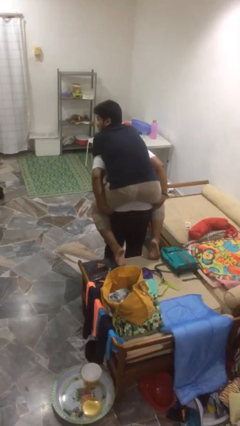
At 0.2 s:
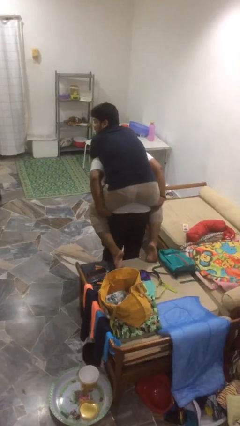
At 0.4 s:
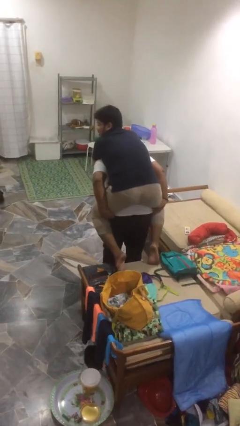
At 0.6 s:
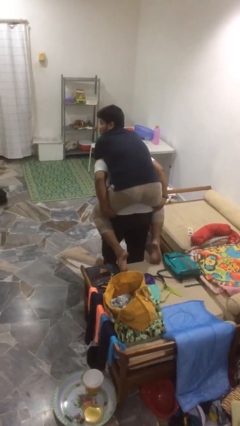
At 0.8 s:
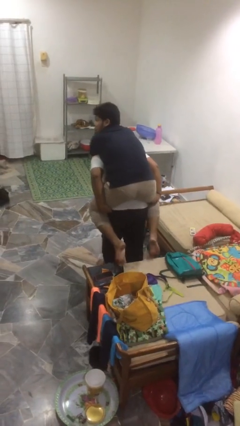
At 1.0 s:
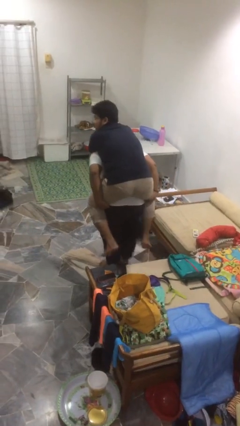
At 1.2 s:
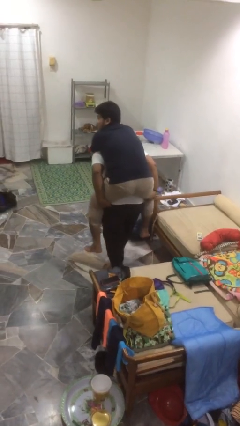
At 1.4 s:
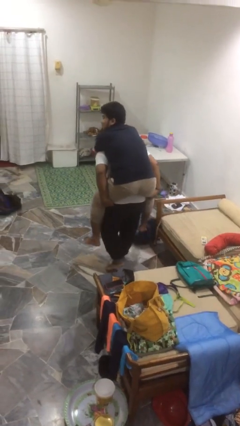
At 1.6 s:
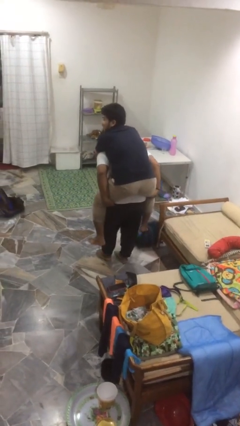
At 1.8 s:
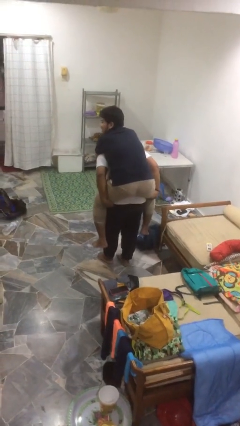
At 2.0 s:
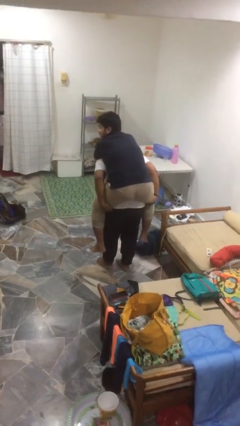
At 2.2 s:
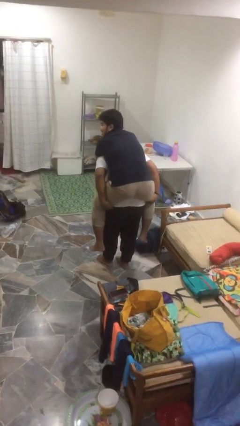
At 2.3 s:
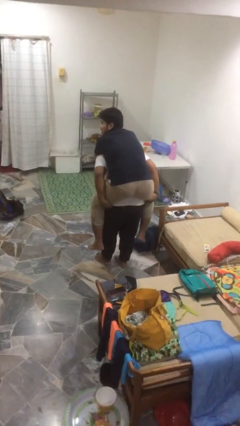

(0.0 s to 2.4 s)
person carries person on back

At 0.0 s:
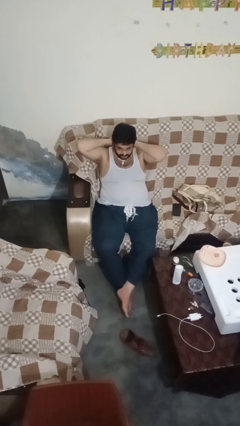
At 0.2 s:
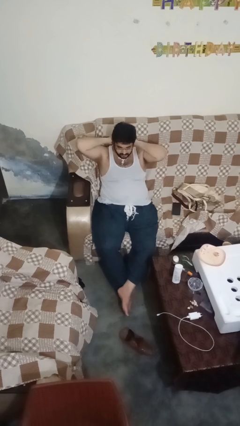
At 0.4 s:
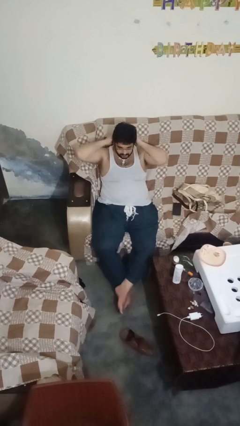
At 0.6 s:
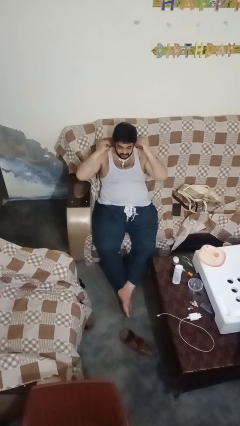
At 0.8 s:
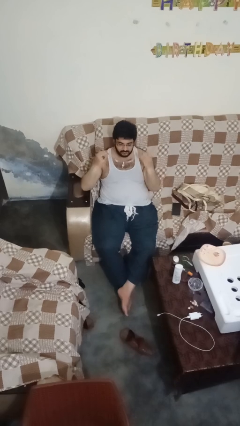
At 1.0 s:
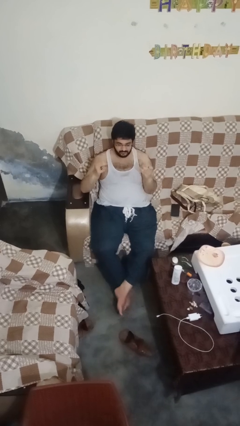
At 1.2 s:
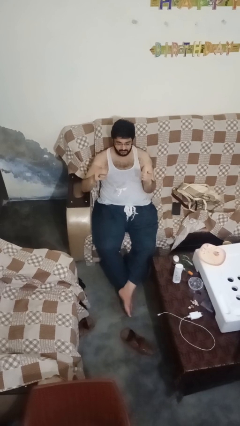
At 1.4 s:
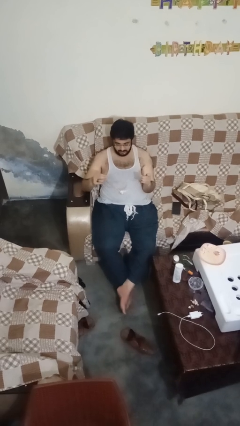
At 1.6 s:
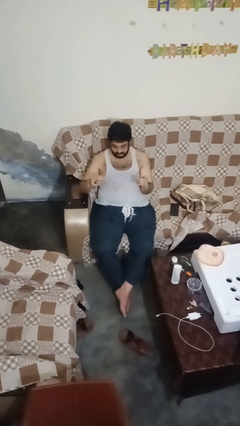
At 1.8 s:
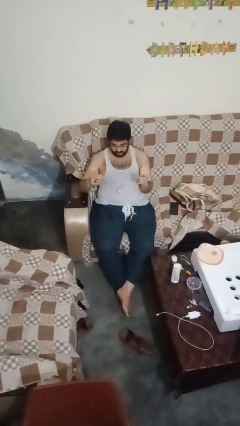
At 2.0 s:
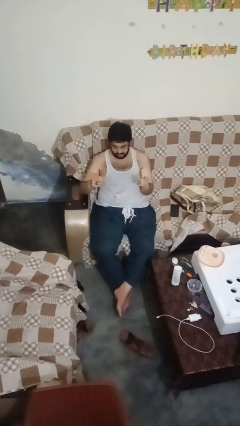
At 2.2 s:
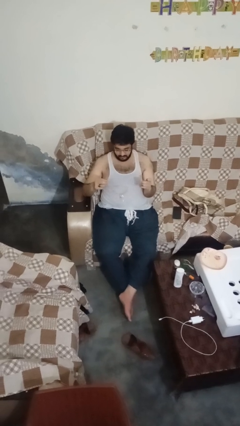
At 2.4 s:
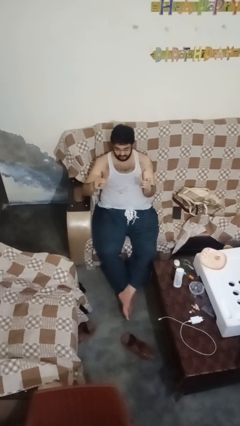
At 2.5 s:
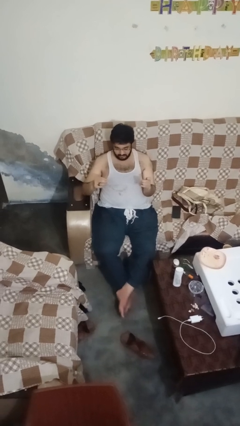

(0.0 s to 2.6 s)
person takes off necklace

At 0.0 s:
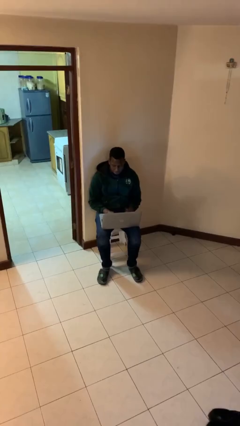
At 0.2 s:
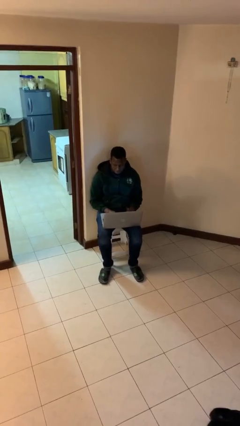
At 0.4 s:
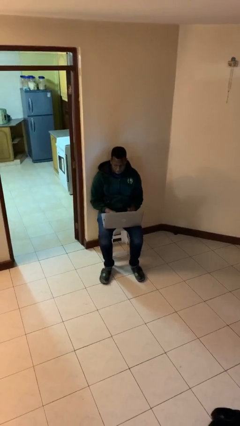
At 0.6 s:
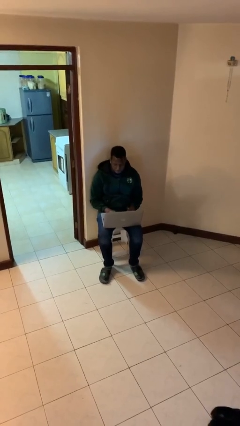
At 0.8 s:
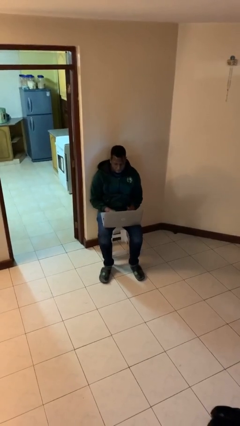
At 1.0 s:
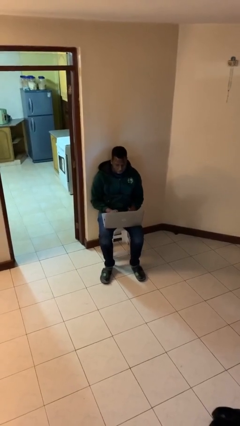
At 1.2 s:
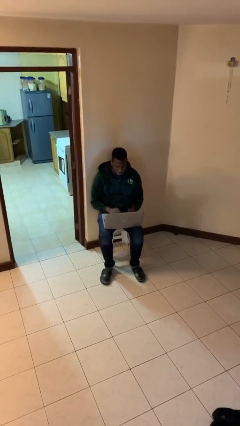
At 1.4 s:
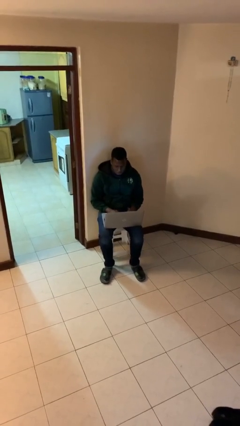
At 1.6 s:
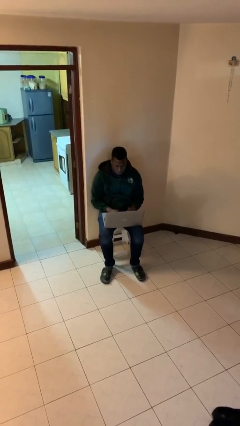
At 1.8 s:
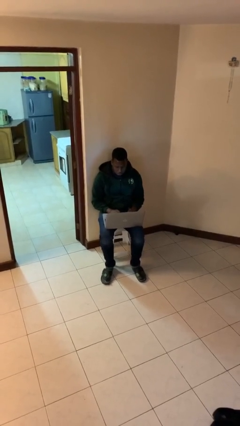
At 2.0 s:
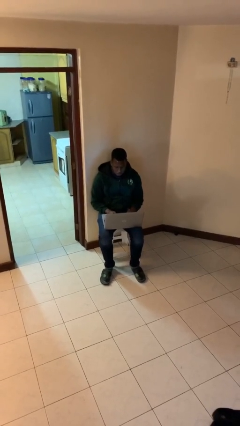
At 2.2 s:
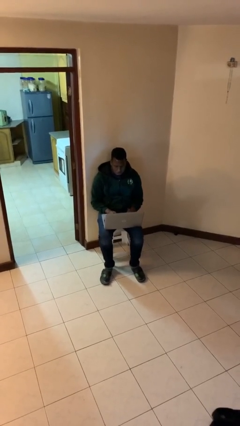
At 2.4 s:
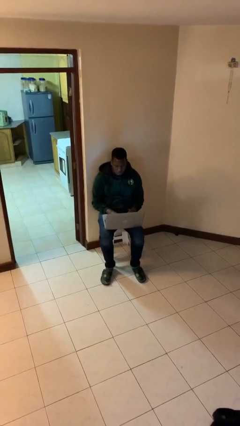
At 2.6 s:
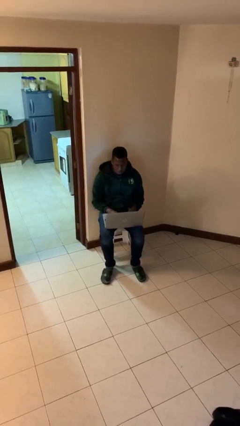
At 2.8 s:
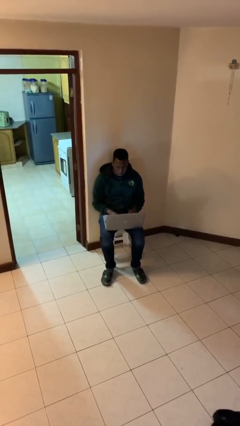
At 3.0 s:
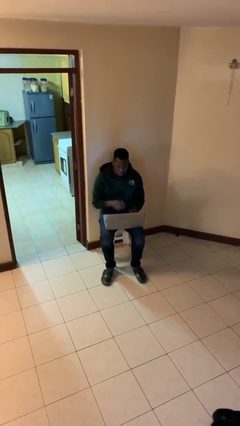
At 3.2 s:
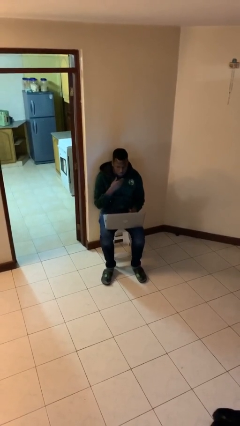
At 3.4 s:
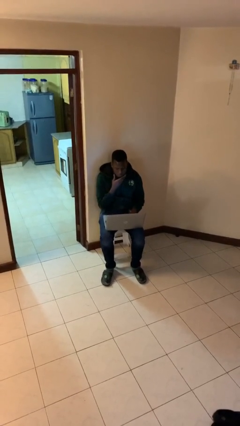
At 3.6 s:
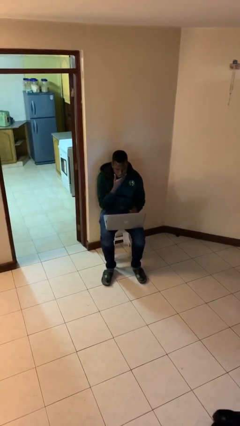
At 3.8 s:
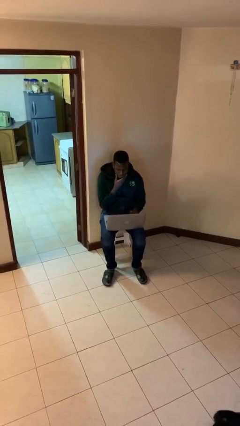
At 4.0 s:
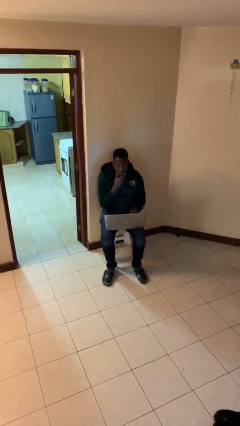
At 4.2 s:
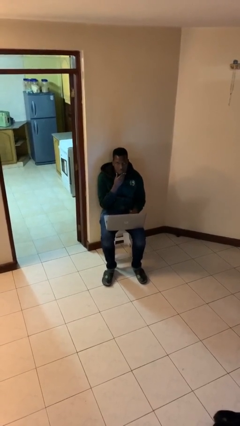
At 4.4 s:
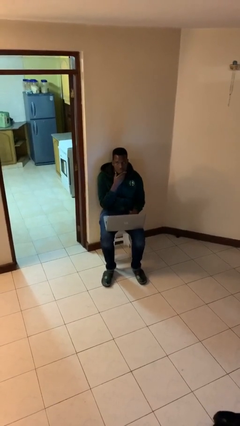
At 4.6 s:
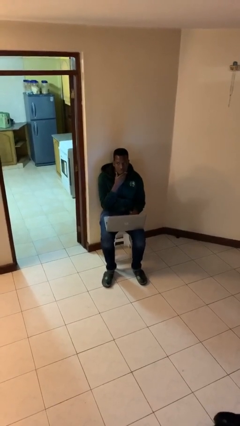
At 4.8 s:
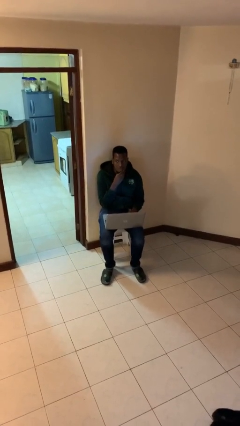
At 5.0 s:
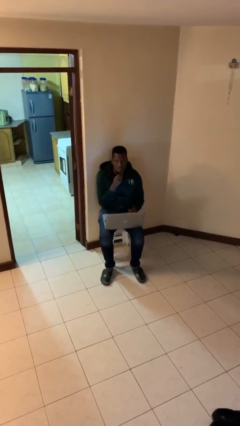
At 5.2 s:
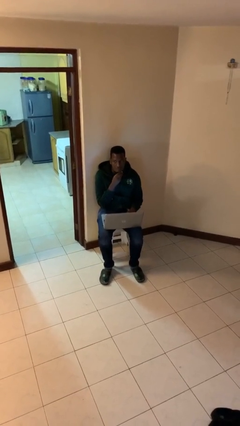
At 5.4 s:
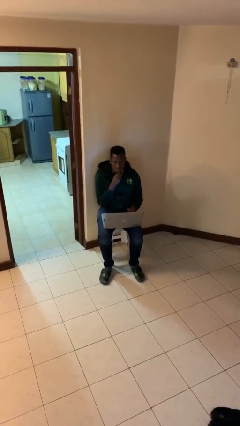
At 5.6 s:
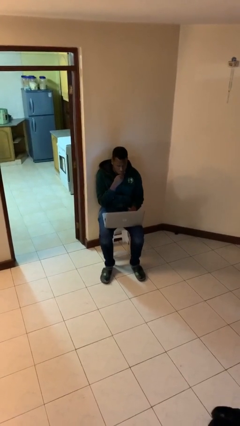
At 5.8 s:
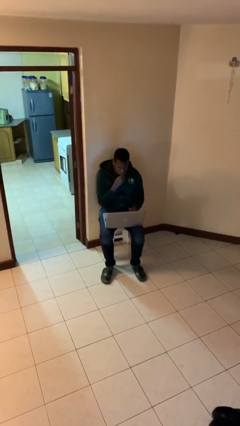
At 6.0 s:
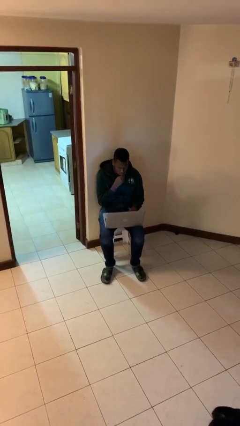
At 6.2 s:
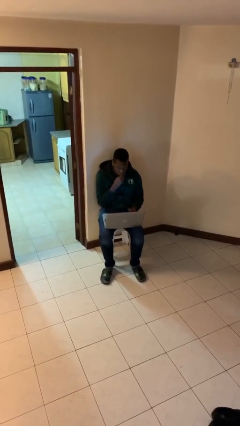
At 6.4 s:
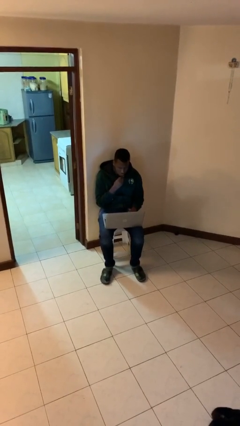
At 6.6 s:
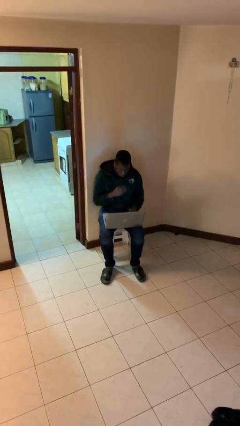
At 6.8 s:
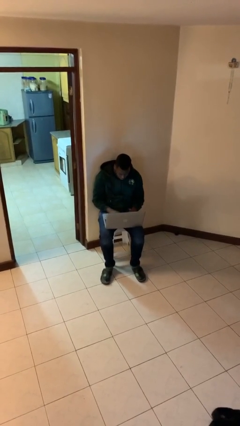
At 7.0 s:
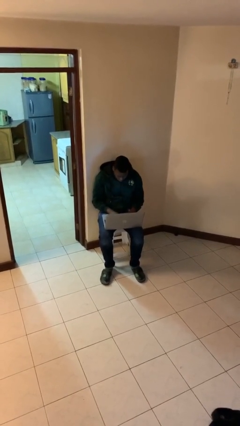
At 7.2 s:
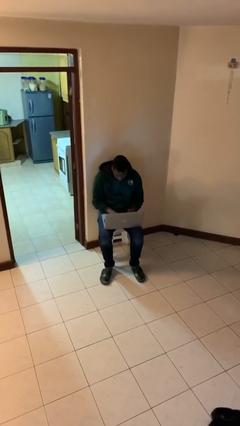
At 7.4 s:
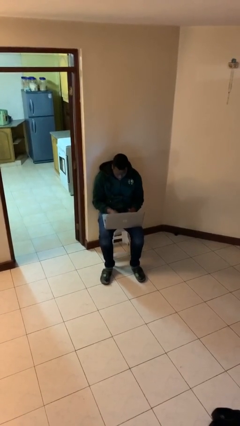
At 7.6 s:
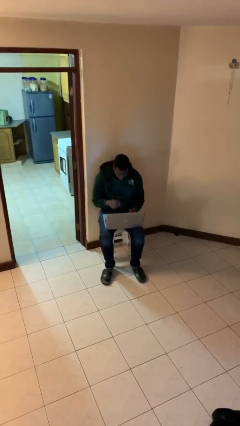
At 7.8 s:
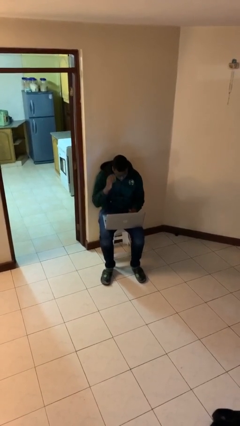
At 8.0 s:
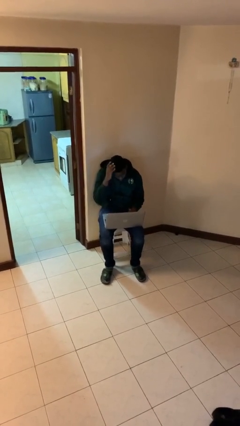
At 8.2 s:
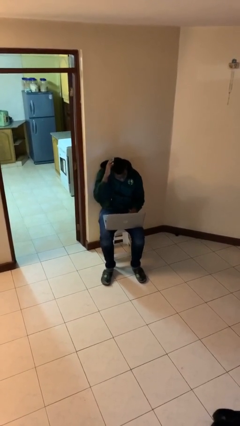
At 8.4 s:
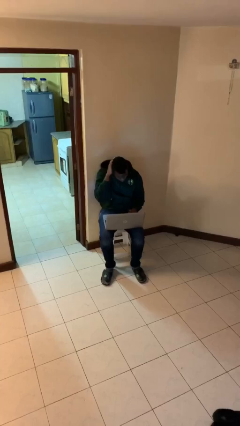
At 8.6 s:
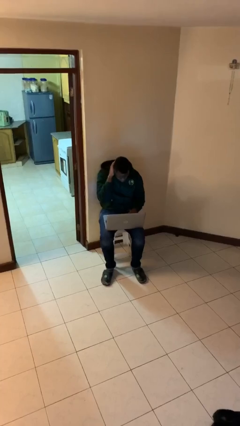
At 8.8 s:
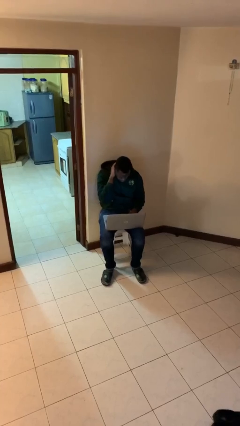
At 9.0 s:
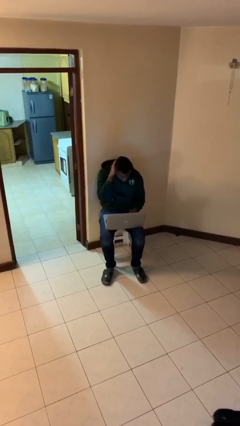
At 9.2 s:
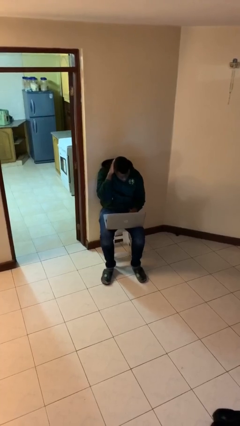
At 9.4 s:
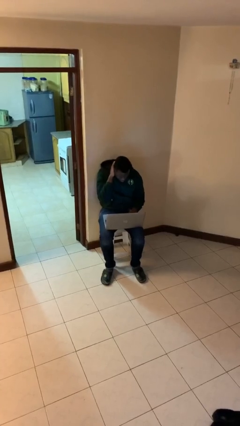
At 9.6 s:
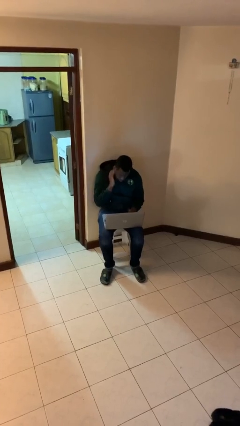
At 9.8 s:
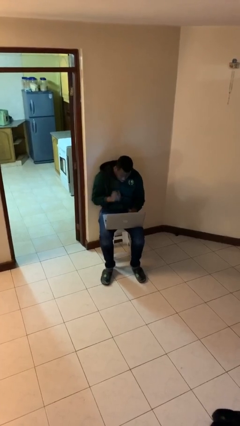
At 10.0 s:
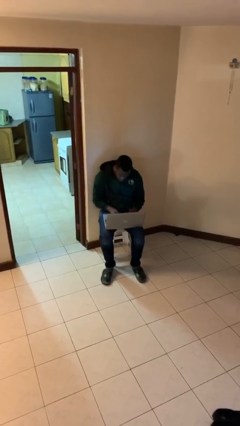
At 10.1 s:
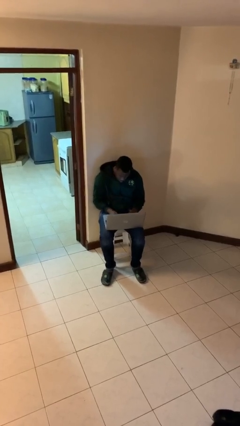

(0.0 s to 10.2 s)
person interacts with laptop

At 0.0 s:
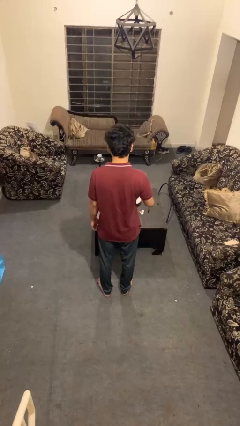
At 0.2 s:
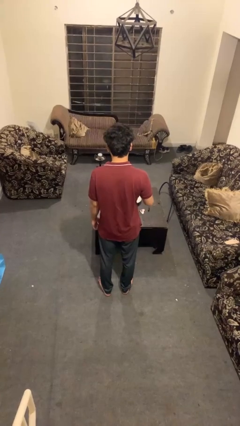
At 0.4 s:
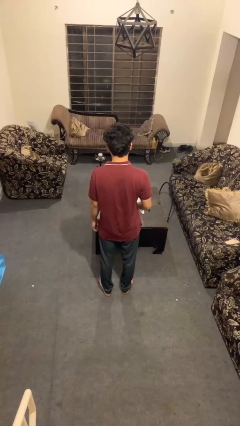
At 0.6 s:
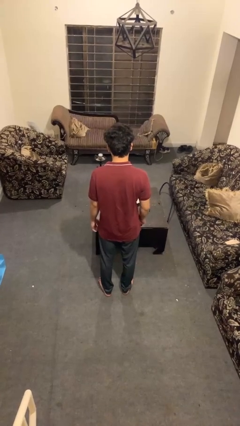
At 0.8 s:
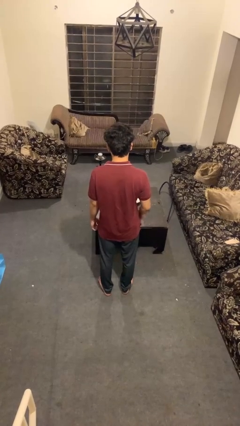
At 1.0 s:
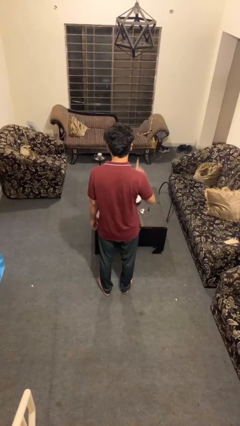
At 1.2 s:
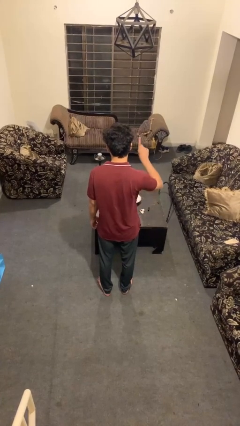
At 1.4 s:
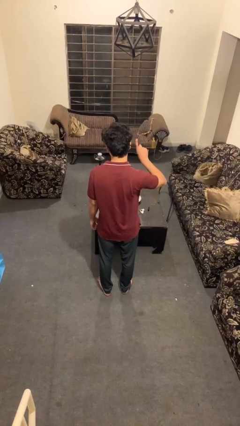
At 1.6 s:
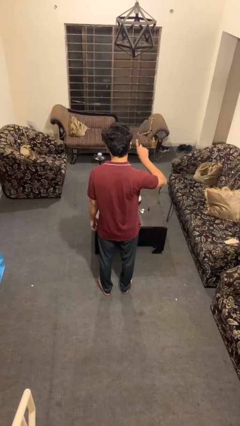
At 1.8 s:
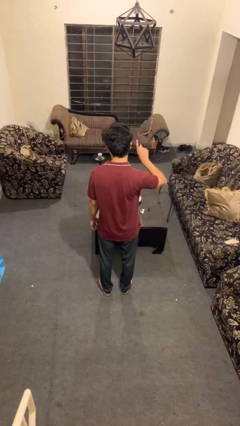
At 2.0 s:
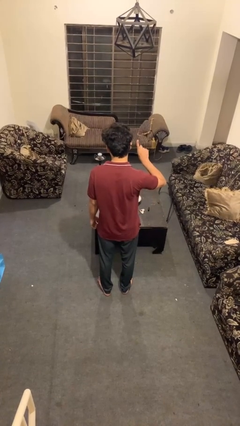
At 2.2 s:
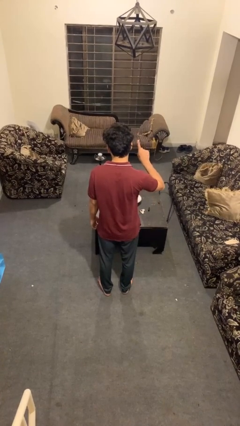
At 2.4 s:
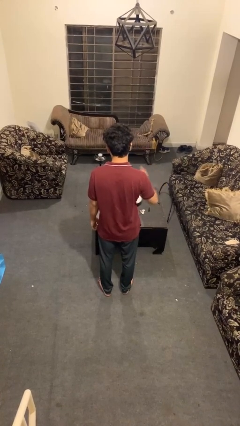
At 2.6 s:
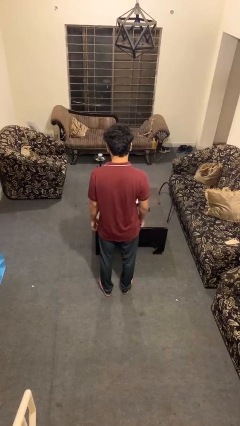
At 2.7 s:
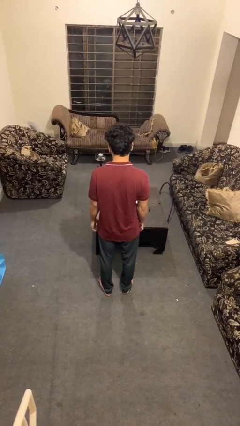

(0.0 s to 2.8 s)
person gestures number one
